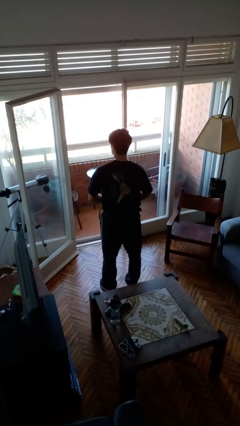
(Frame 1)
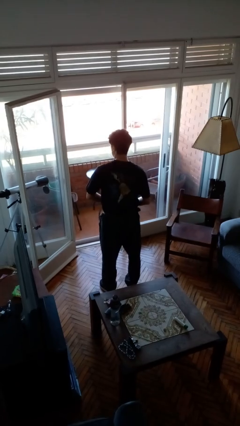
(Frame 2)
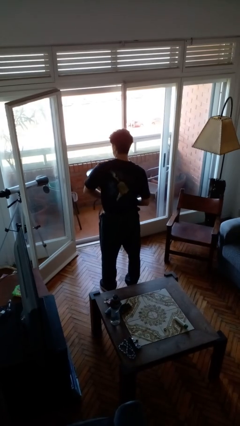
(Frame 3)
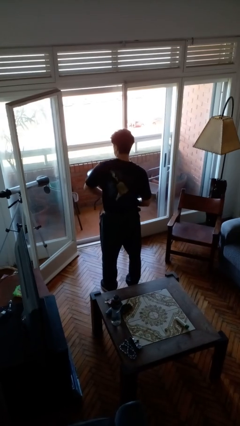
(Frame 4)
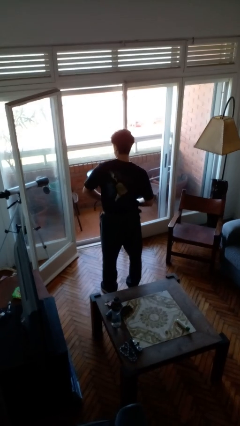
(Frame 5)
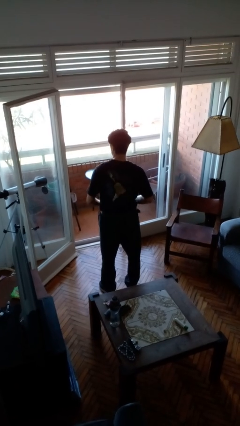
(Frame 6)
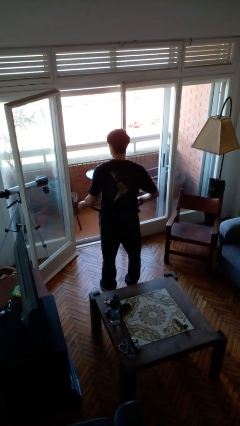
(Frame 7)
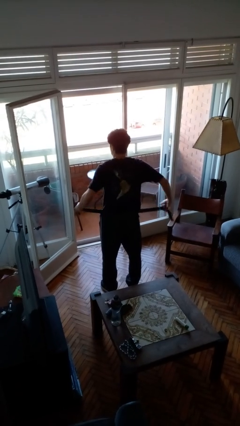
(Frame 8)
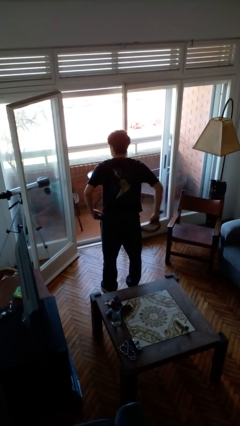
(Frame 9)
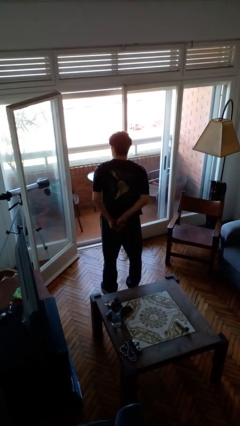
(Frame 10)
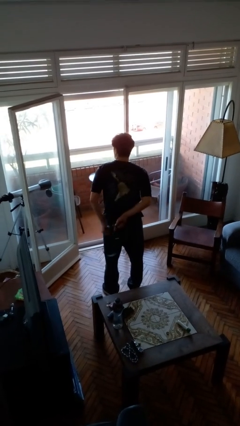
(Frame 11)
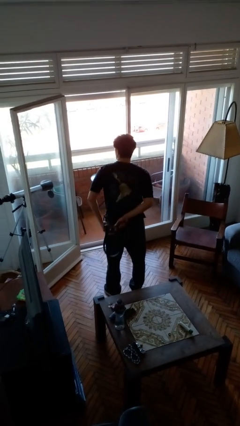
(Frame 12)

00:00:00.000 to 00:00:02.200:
person takes off belt

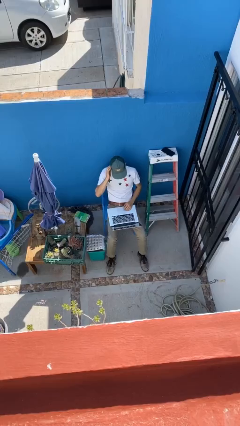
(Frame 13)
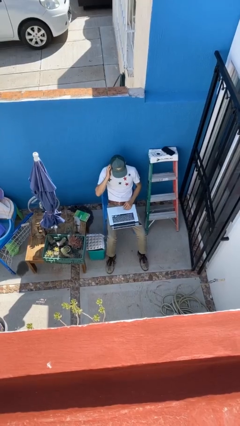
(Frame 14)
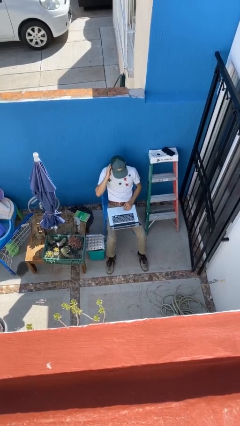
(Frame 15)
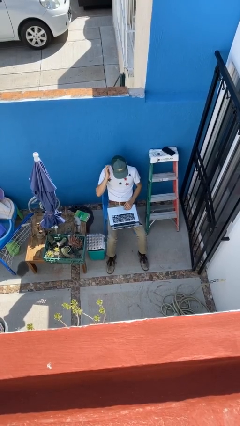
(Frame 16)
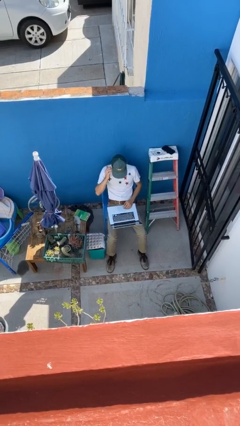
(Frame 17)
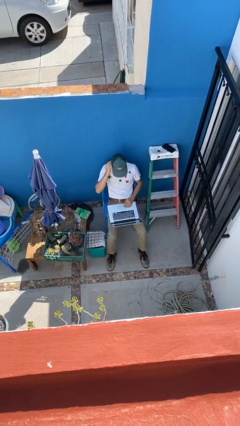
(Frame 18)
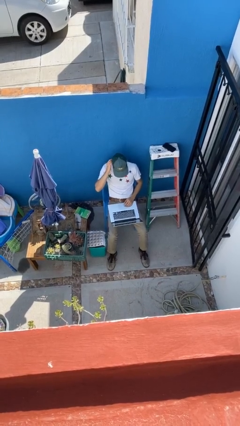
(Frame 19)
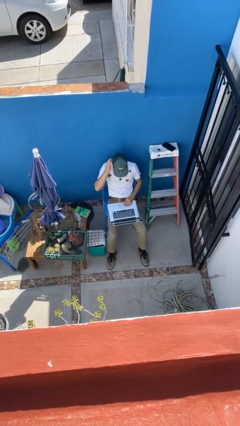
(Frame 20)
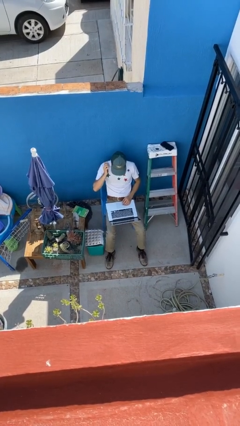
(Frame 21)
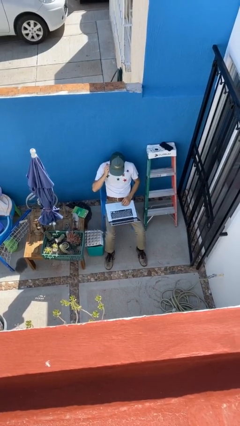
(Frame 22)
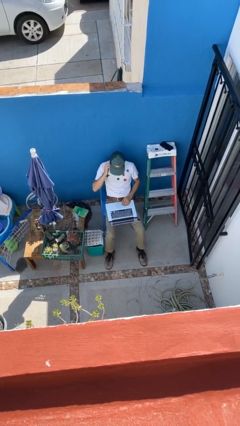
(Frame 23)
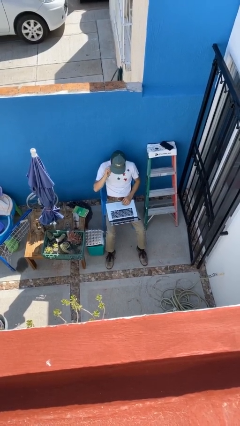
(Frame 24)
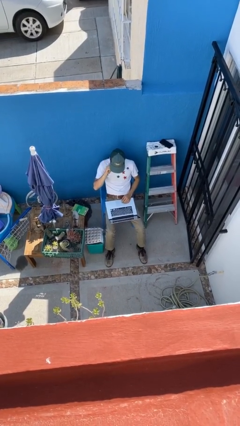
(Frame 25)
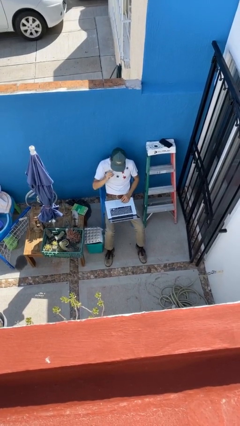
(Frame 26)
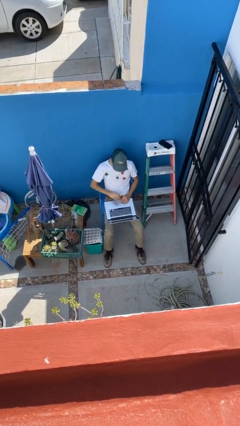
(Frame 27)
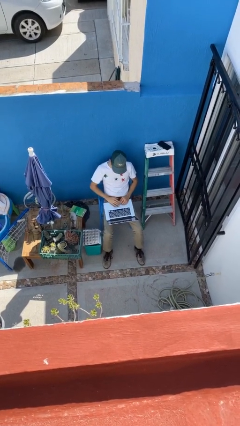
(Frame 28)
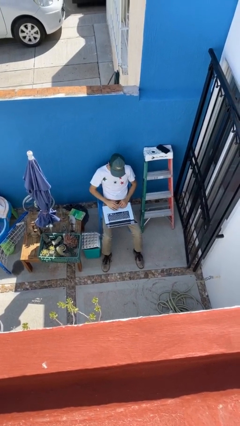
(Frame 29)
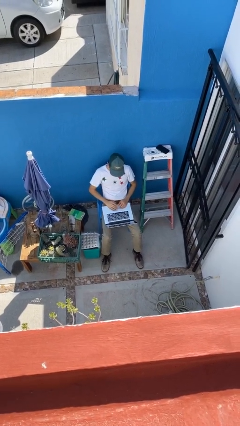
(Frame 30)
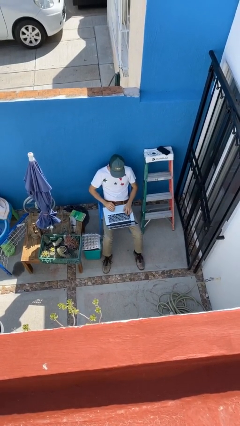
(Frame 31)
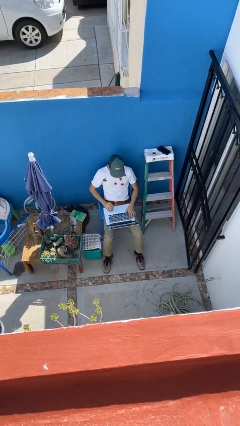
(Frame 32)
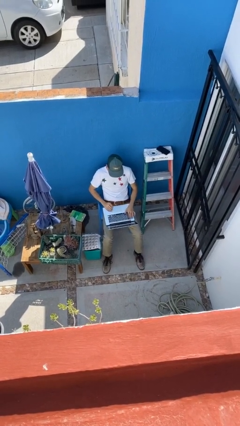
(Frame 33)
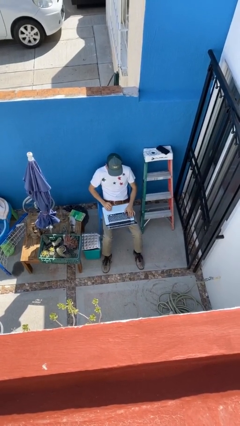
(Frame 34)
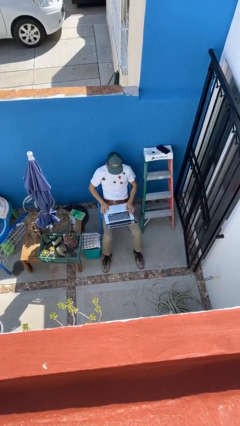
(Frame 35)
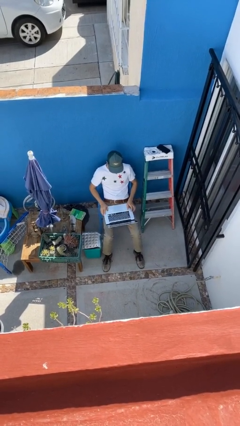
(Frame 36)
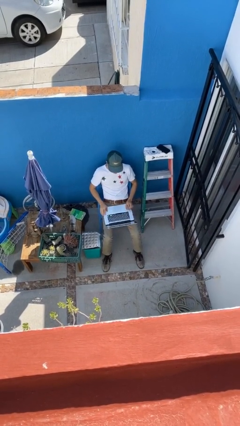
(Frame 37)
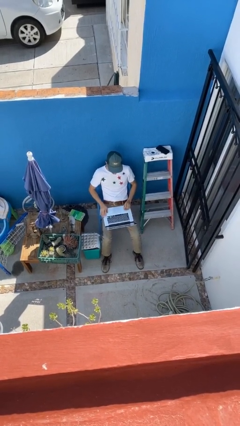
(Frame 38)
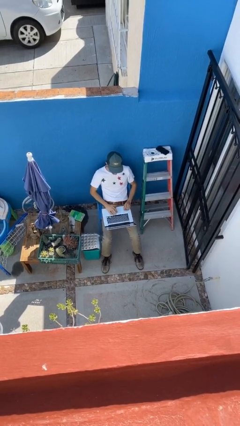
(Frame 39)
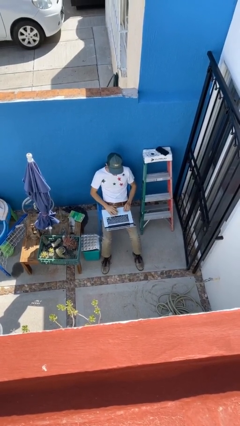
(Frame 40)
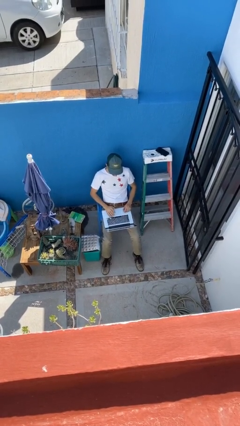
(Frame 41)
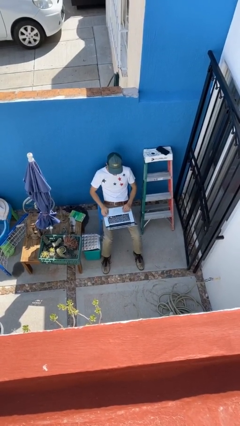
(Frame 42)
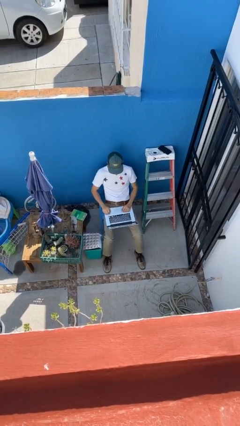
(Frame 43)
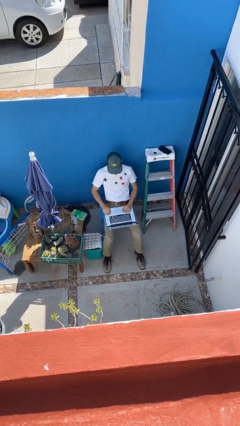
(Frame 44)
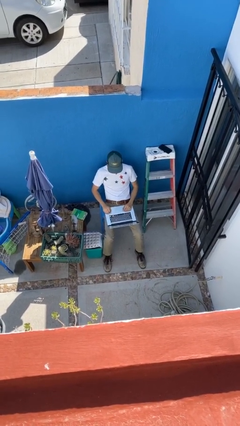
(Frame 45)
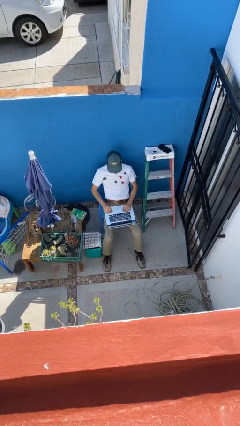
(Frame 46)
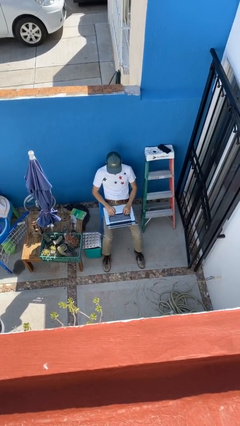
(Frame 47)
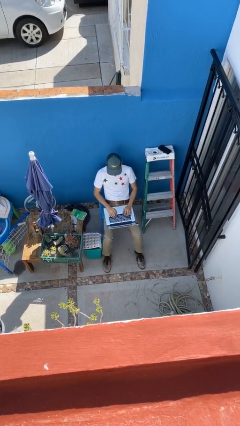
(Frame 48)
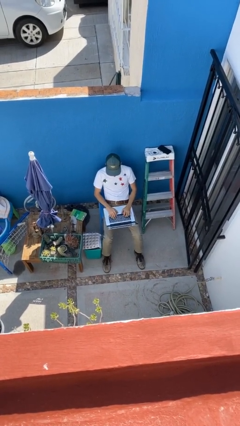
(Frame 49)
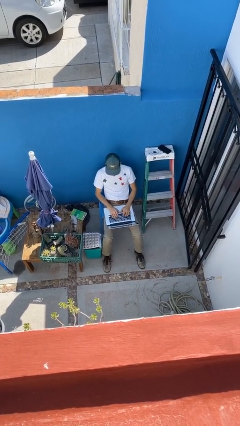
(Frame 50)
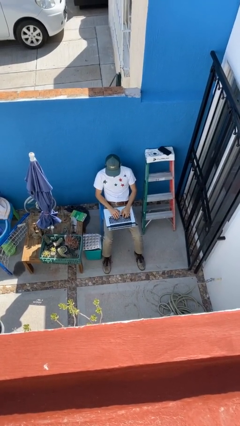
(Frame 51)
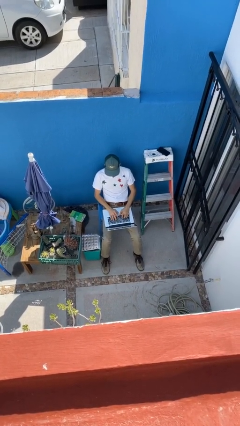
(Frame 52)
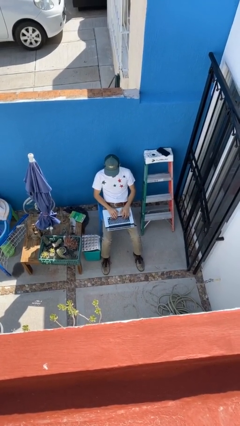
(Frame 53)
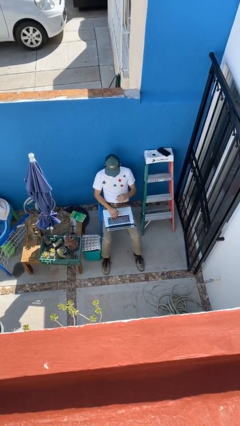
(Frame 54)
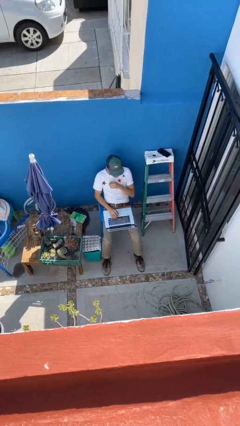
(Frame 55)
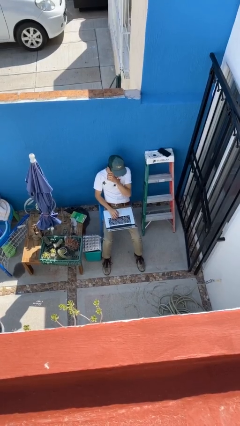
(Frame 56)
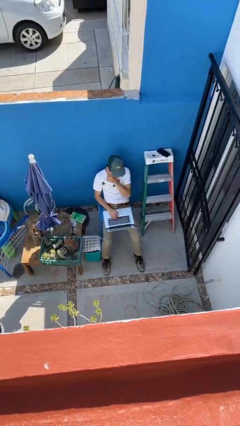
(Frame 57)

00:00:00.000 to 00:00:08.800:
person interacts with laptop

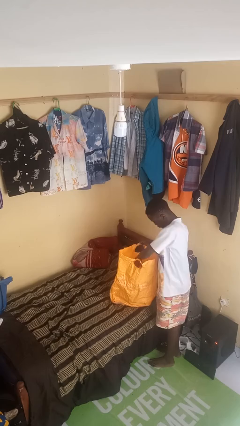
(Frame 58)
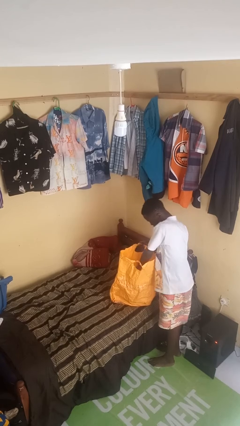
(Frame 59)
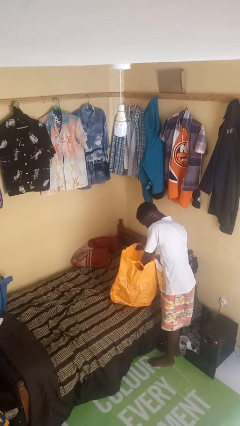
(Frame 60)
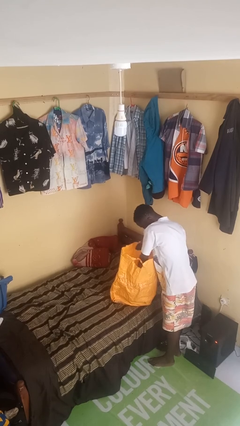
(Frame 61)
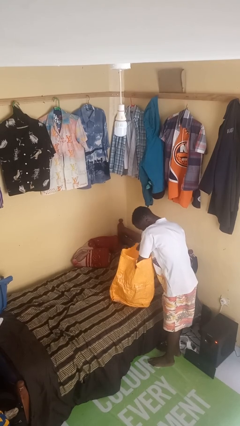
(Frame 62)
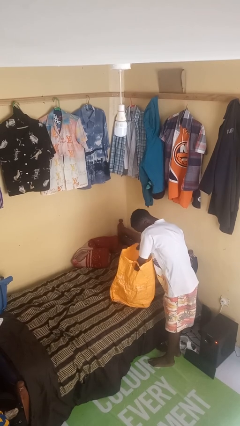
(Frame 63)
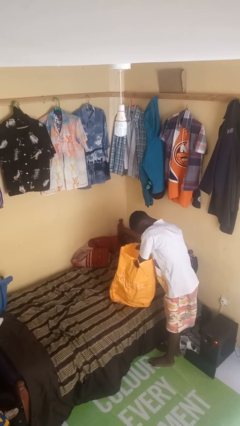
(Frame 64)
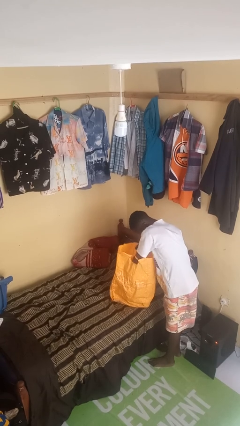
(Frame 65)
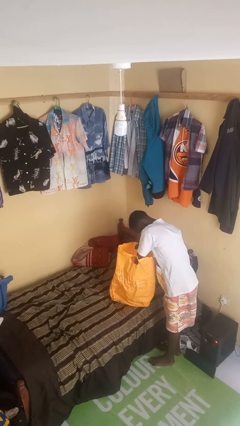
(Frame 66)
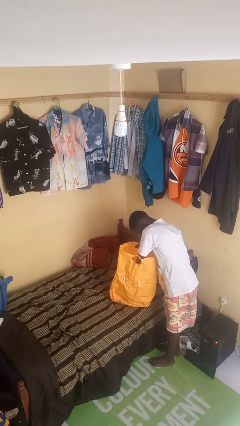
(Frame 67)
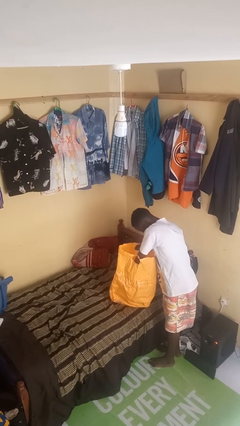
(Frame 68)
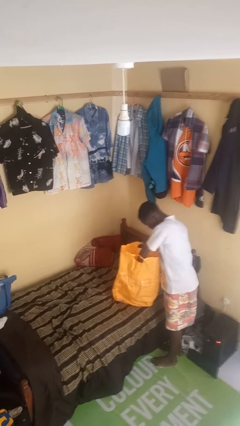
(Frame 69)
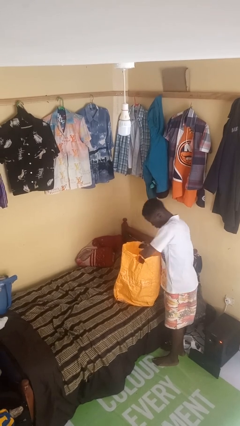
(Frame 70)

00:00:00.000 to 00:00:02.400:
person searches in bag

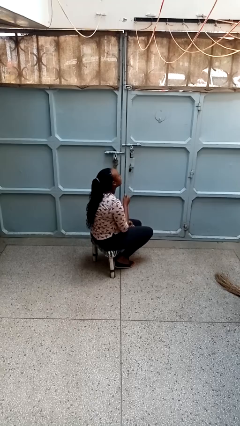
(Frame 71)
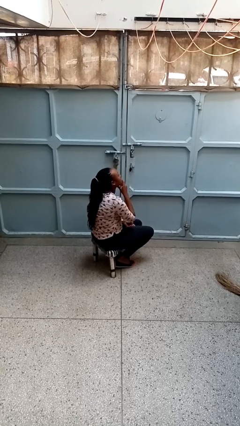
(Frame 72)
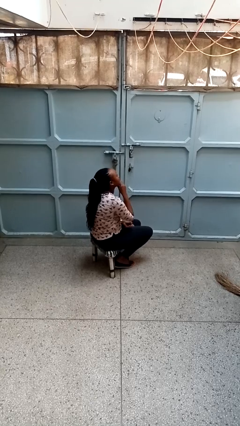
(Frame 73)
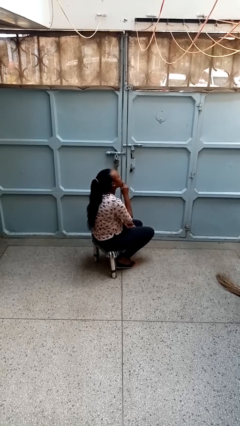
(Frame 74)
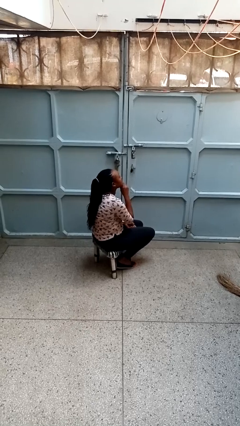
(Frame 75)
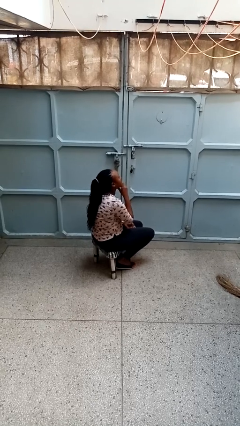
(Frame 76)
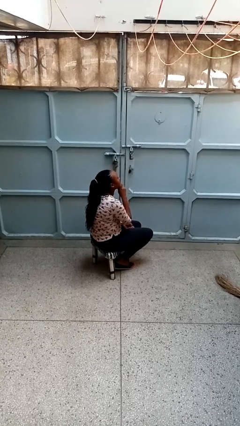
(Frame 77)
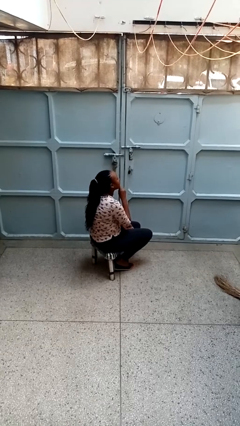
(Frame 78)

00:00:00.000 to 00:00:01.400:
person strokes chin

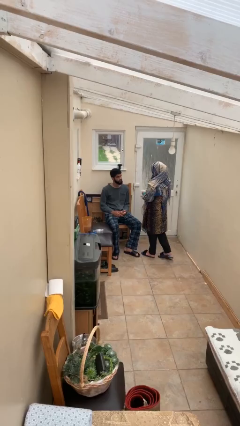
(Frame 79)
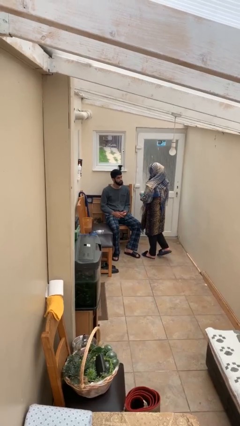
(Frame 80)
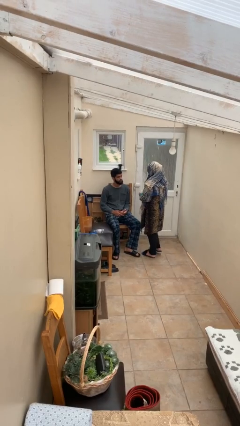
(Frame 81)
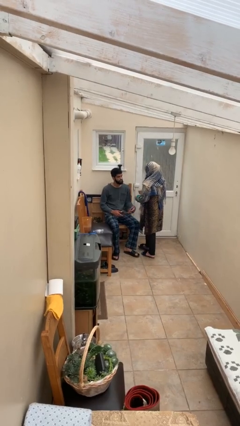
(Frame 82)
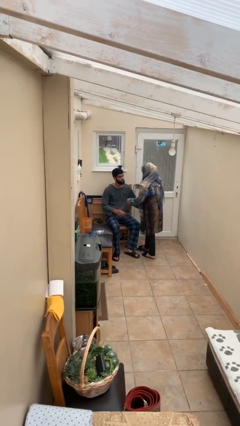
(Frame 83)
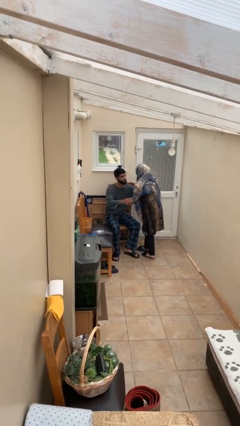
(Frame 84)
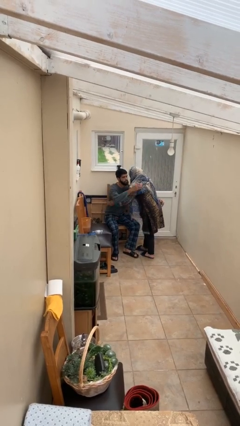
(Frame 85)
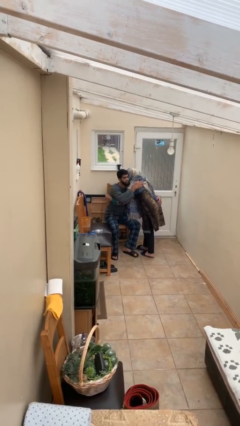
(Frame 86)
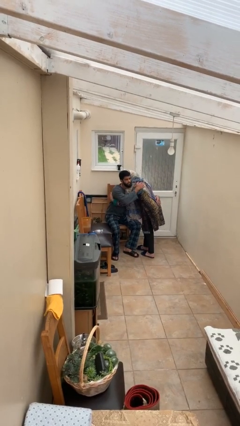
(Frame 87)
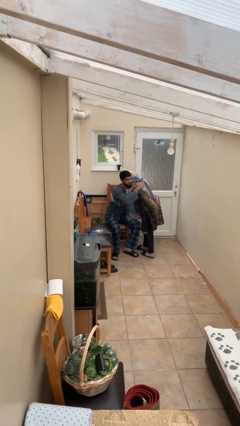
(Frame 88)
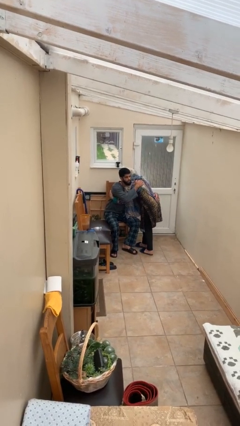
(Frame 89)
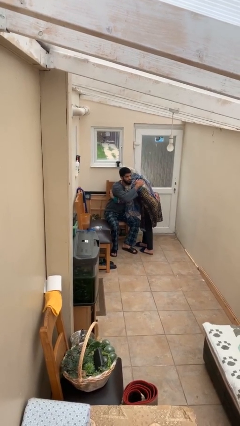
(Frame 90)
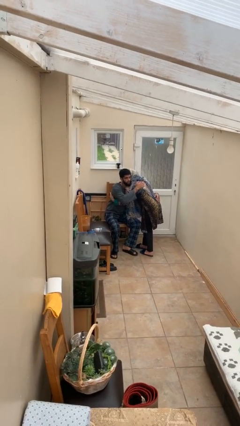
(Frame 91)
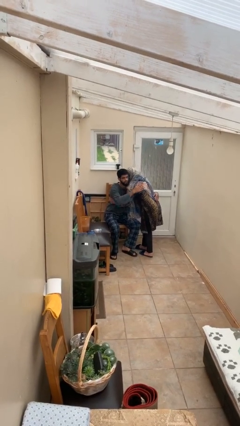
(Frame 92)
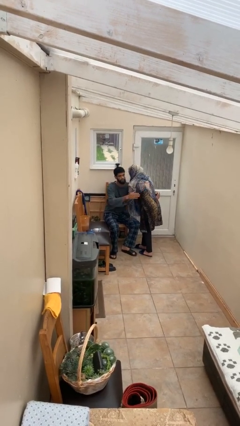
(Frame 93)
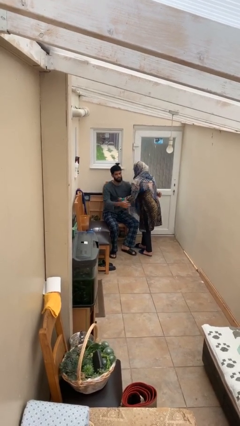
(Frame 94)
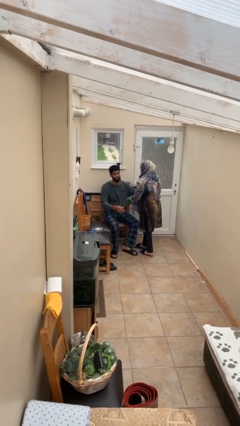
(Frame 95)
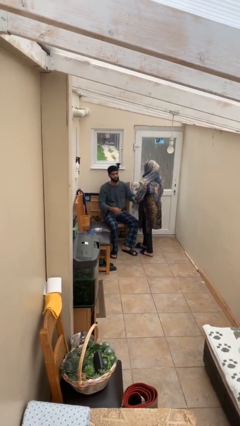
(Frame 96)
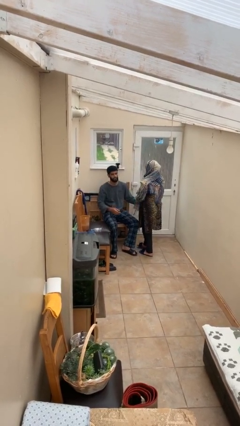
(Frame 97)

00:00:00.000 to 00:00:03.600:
person embraces person
